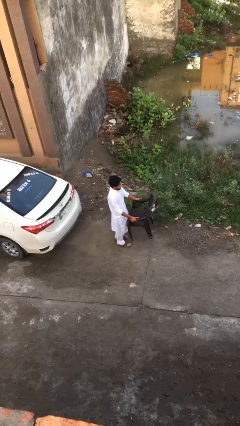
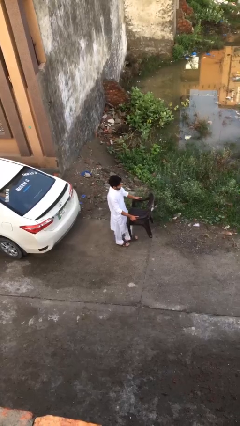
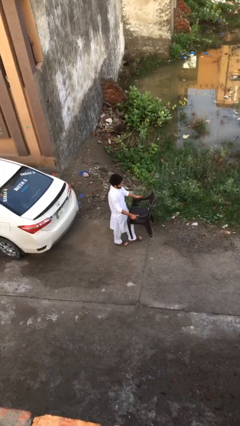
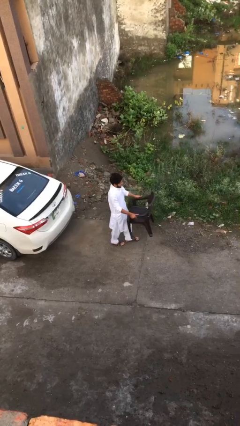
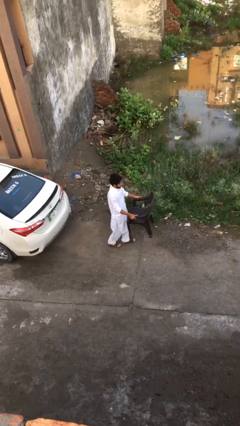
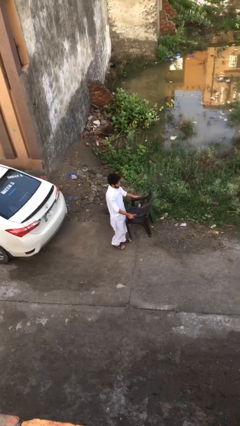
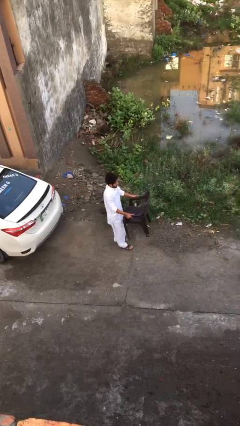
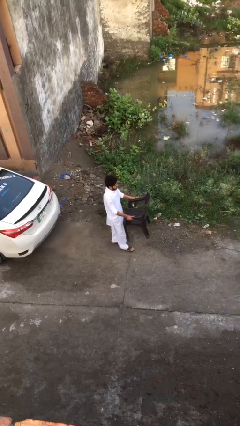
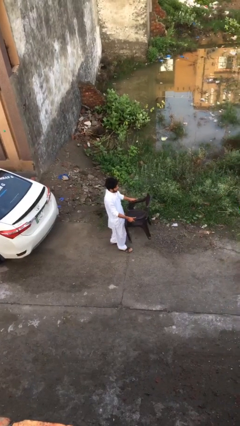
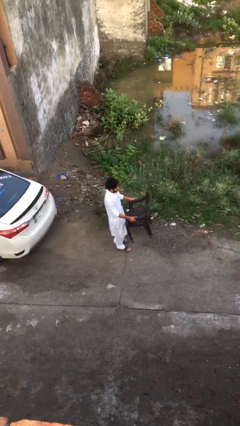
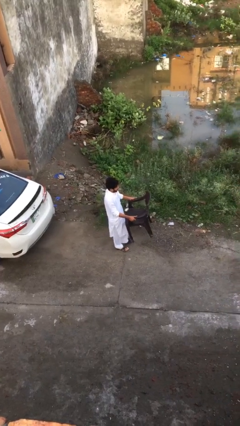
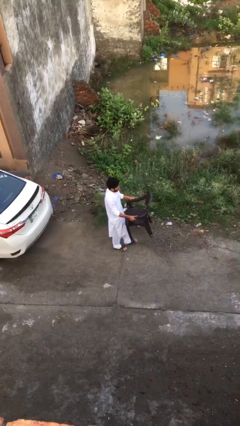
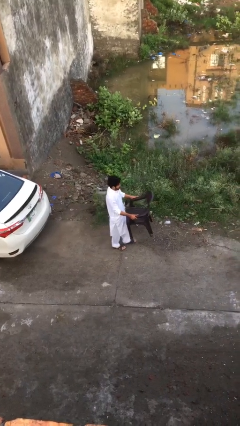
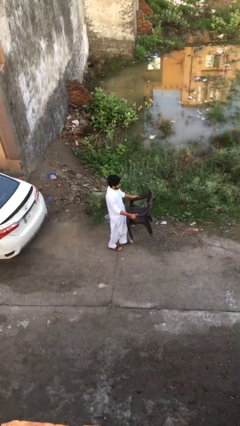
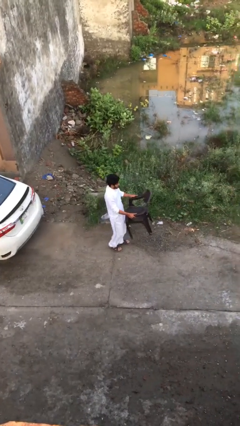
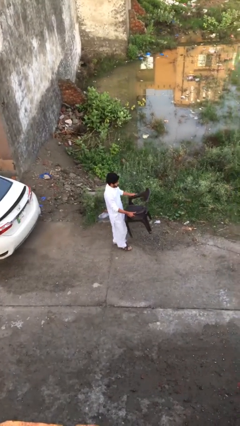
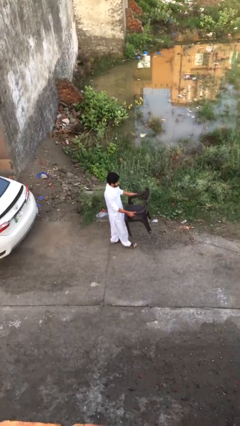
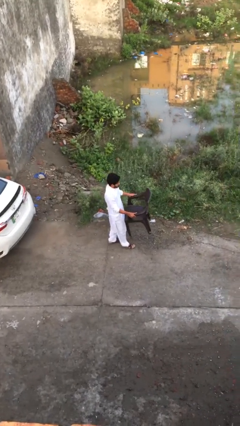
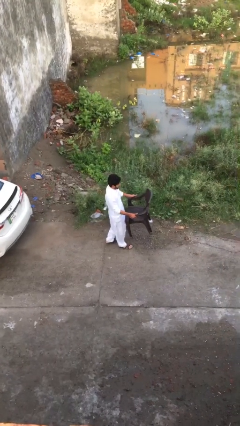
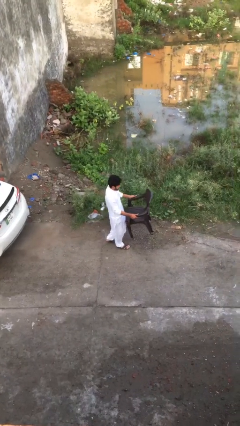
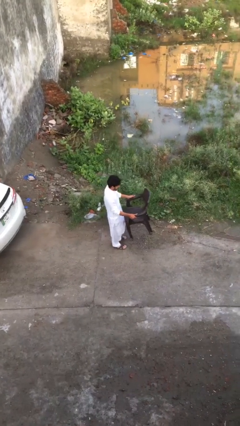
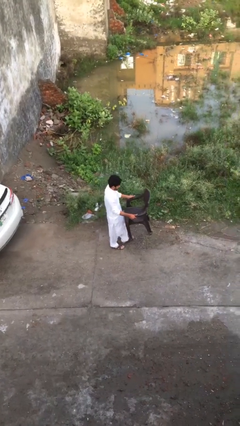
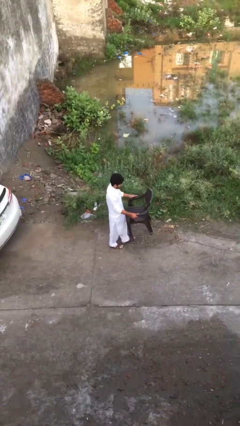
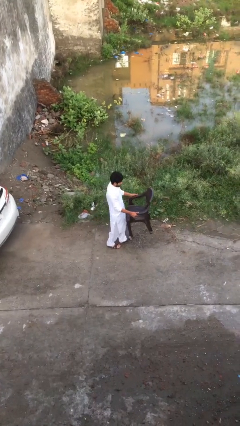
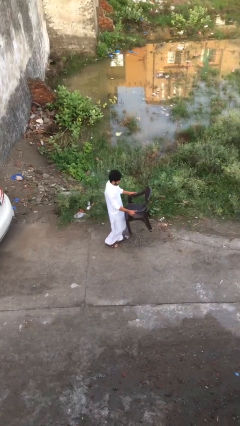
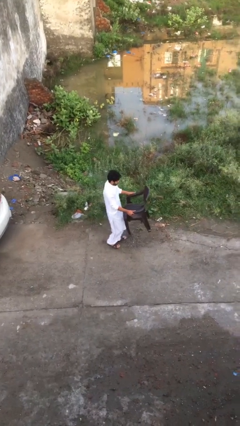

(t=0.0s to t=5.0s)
person carries heavy object

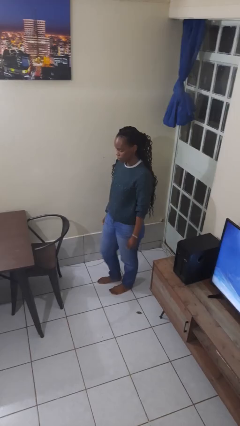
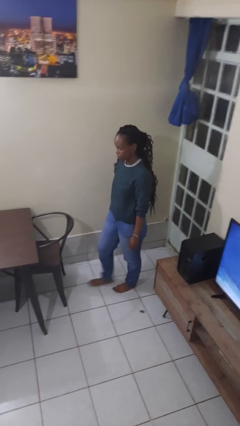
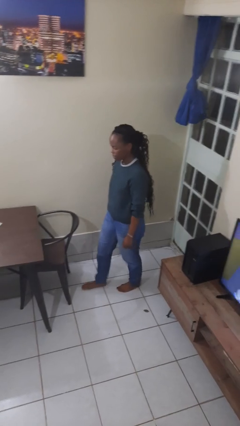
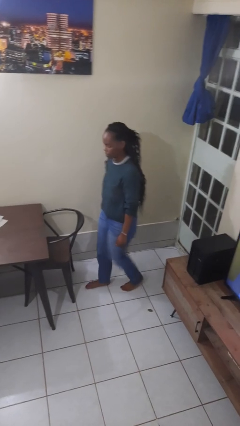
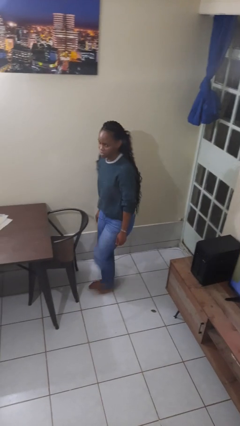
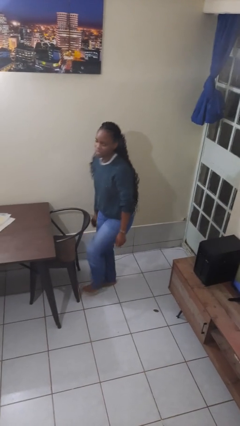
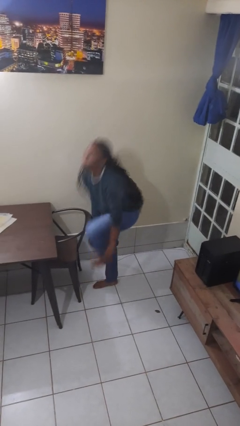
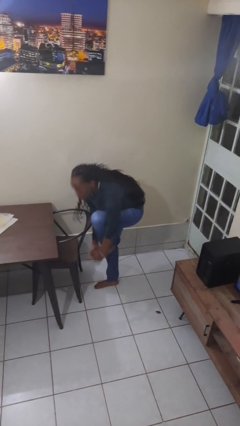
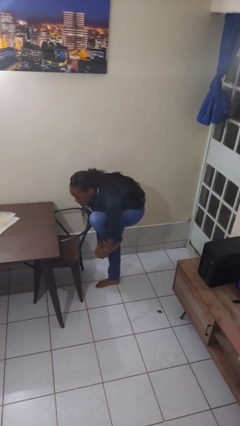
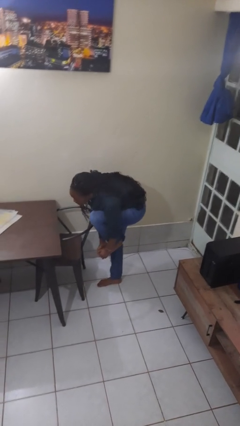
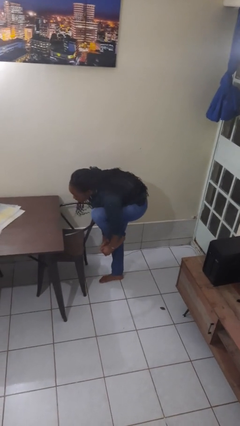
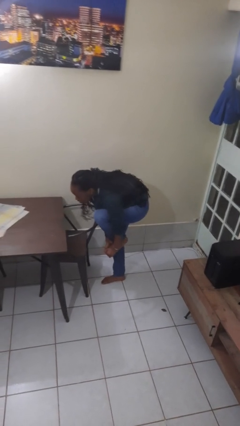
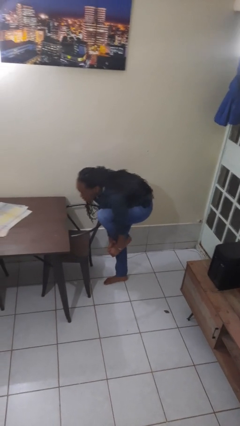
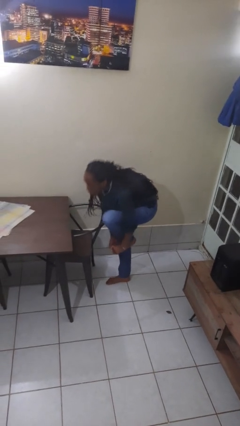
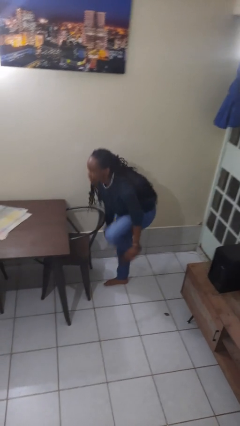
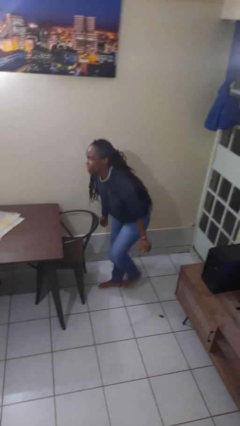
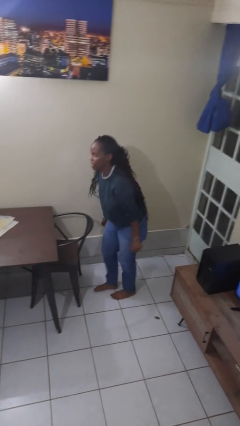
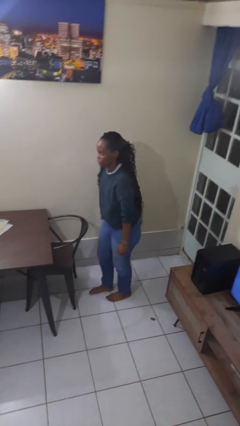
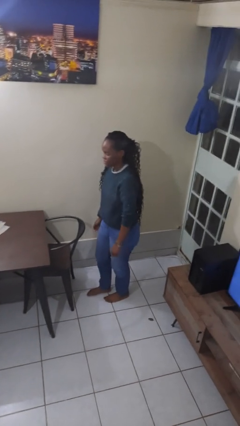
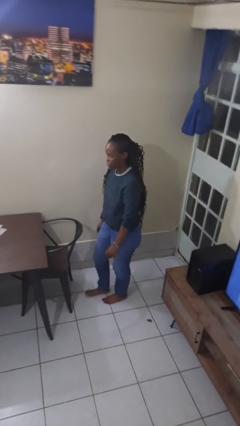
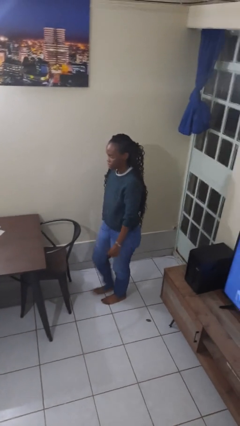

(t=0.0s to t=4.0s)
person stubs toe

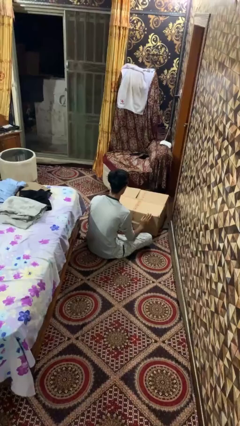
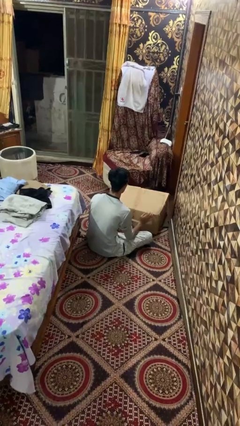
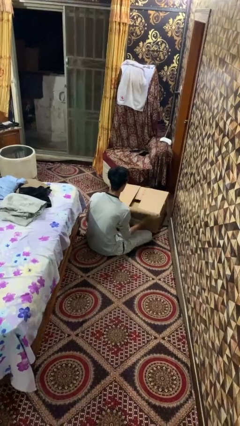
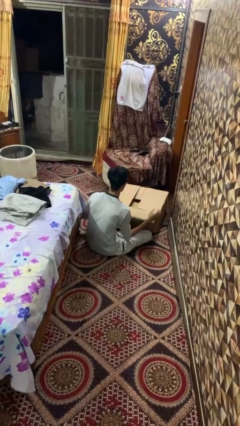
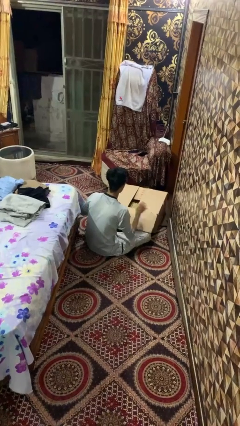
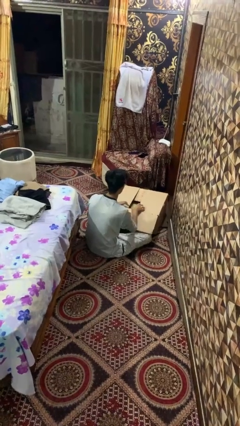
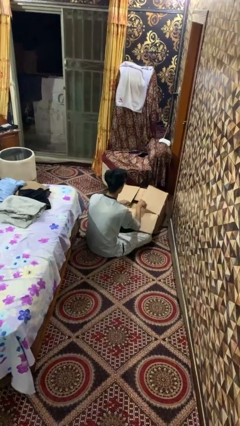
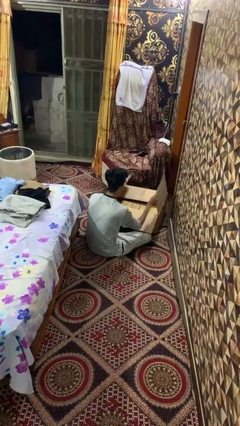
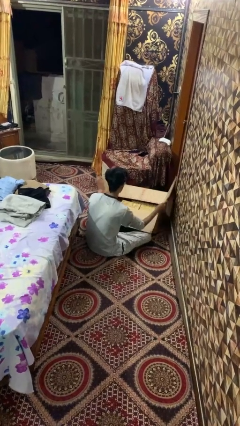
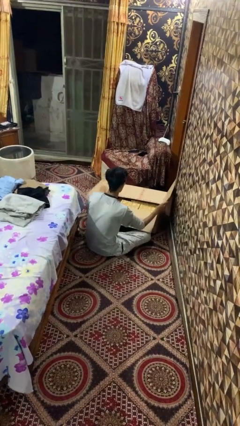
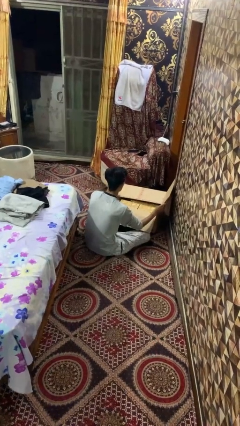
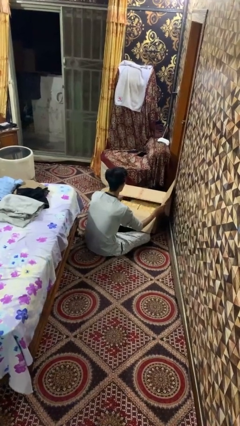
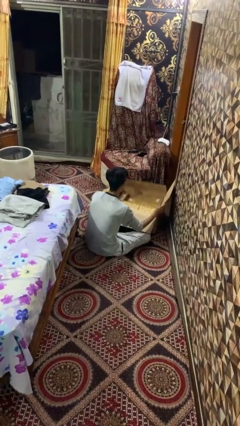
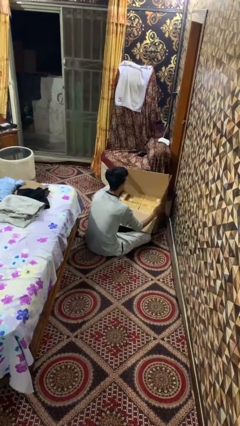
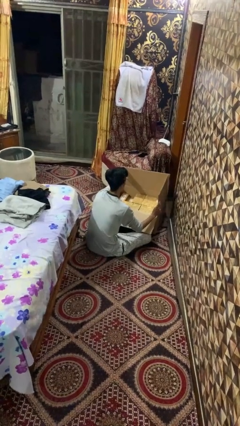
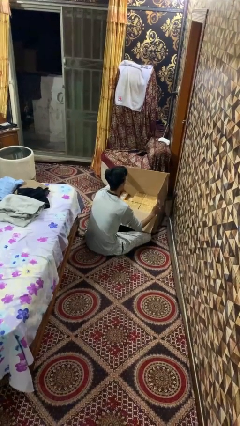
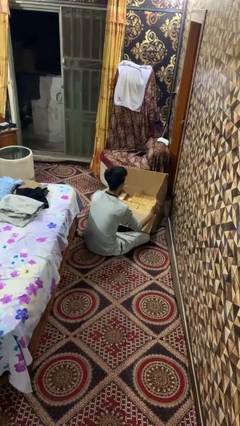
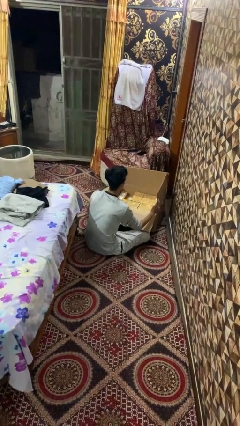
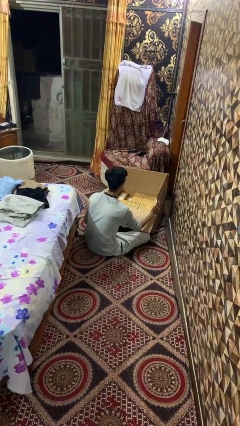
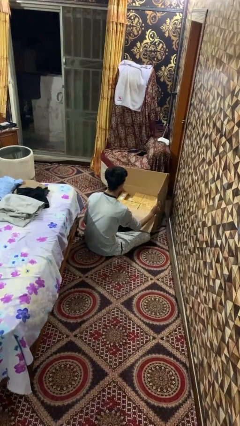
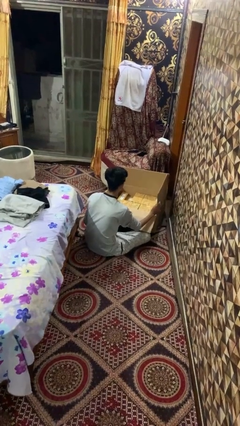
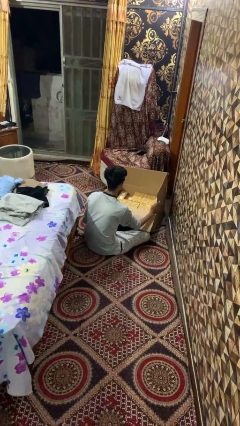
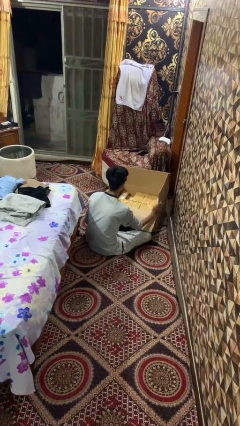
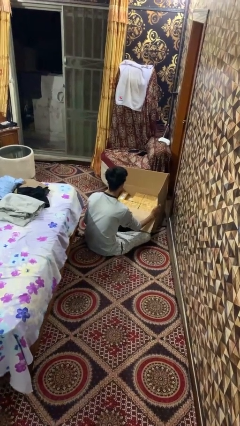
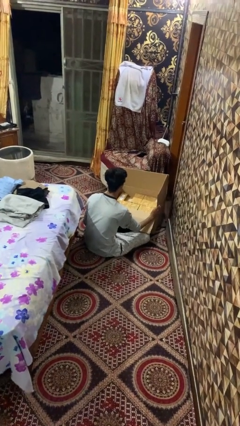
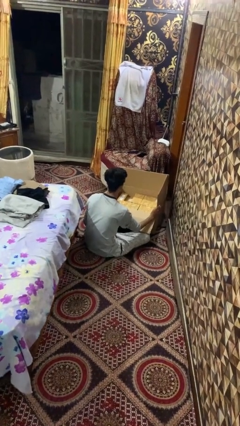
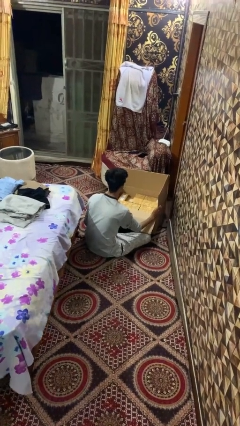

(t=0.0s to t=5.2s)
person opens box

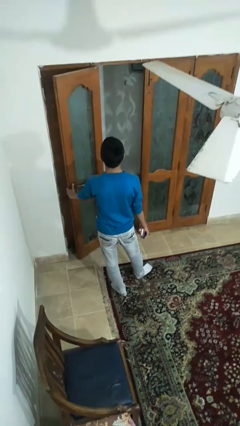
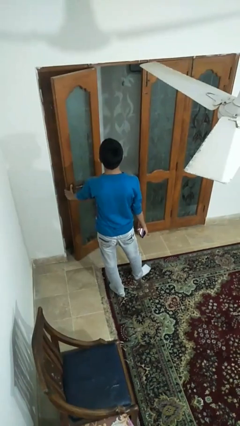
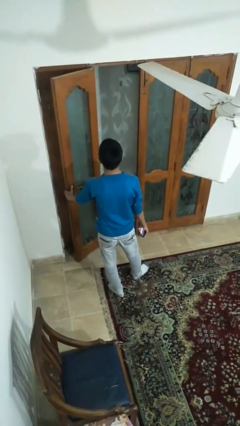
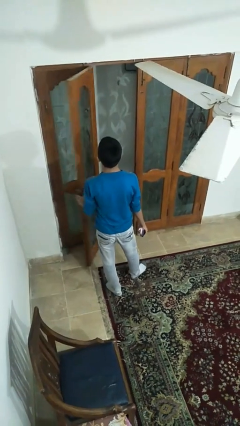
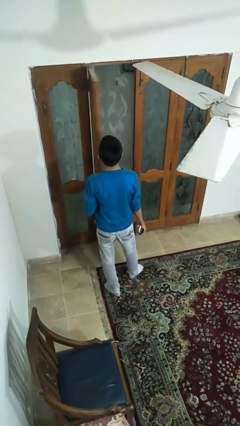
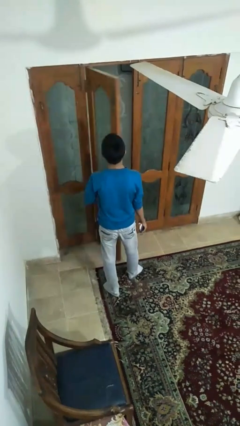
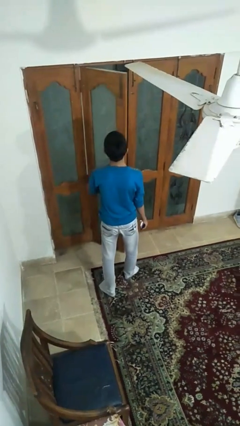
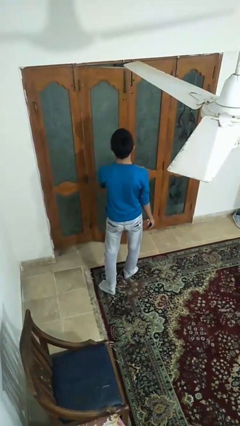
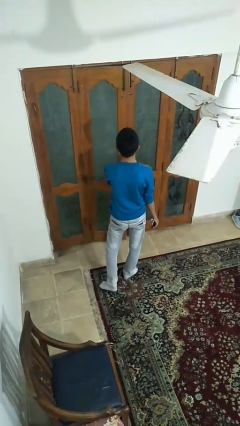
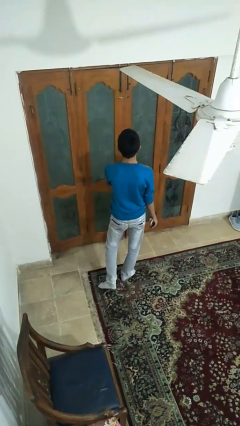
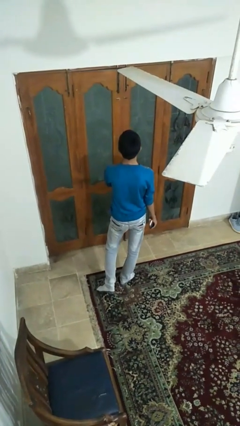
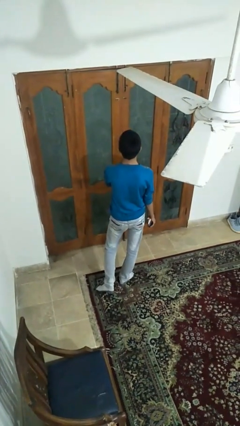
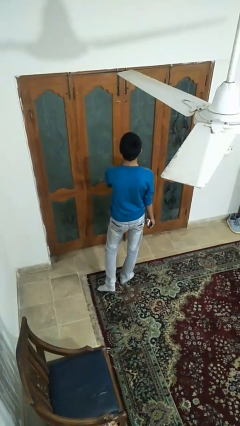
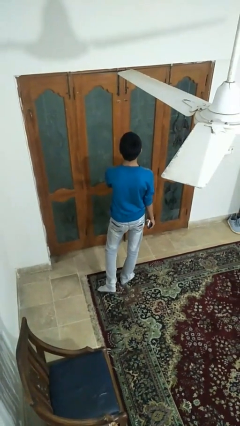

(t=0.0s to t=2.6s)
person closes facility door

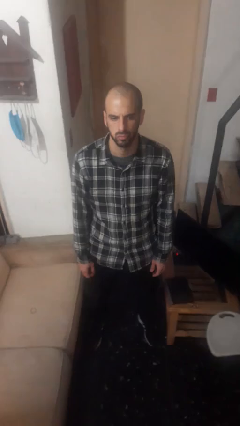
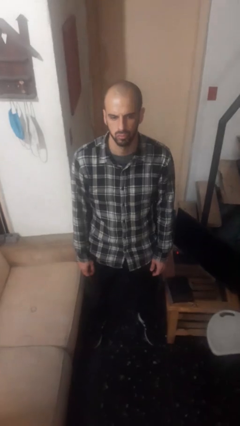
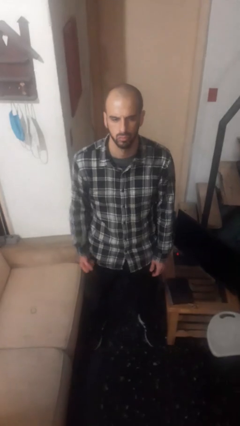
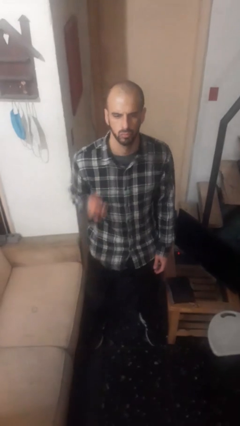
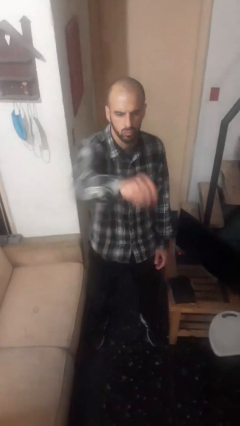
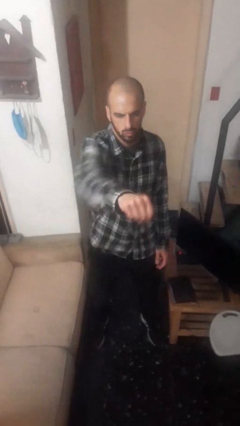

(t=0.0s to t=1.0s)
person punches
